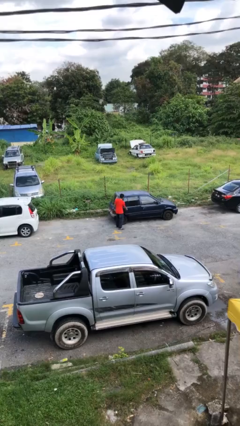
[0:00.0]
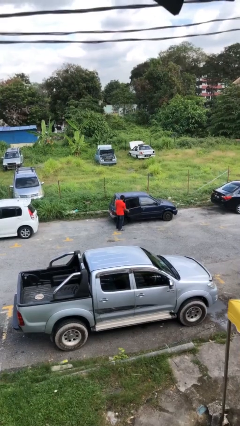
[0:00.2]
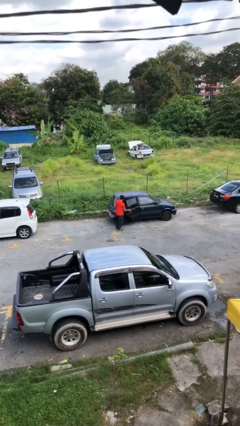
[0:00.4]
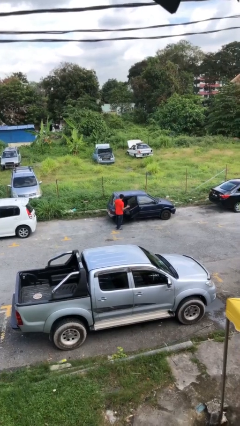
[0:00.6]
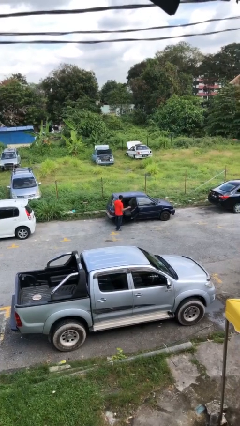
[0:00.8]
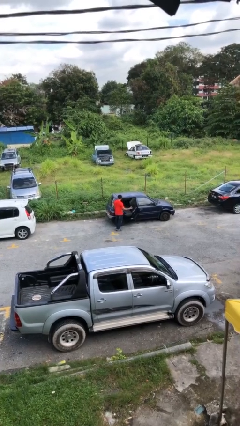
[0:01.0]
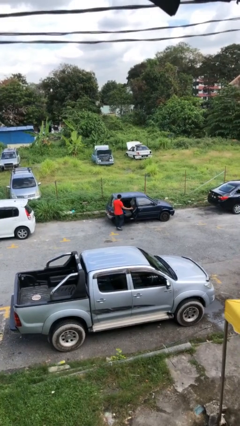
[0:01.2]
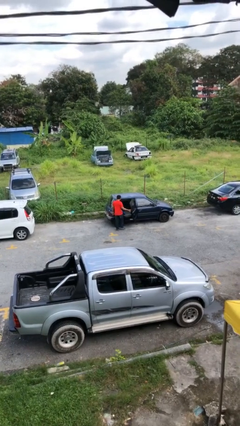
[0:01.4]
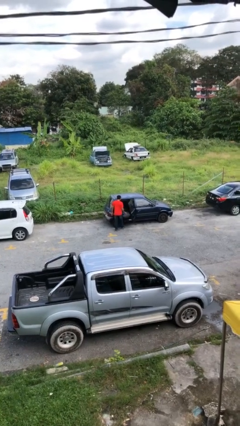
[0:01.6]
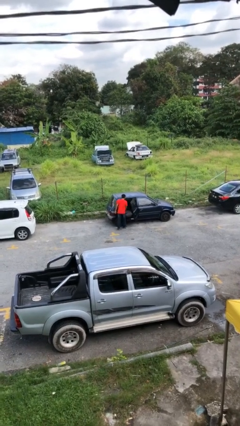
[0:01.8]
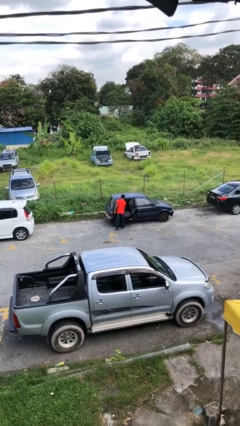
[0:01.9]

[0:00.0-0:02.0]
person opens car door

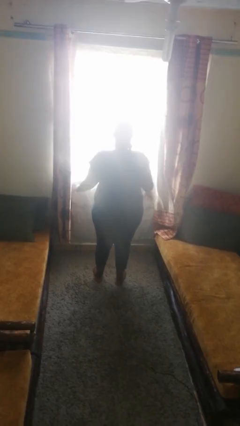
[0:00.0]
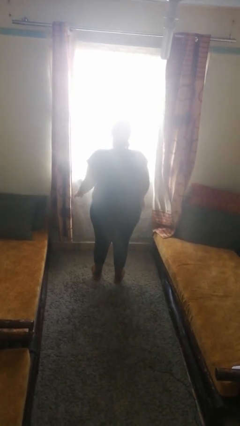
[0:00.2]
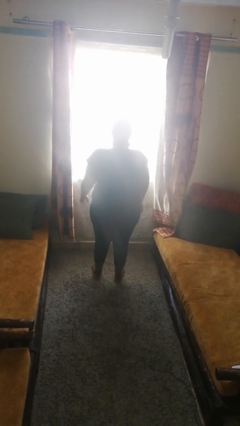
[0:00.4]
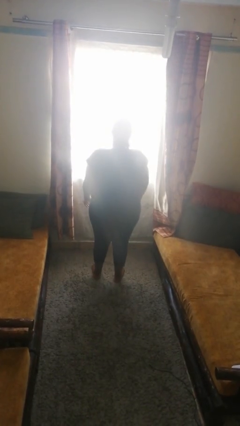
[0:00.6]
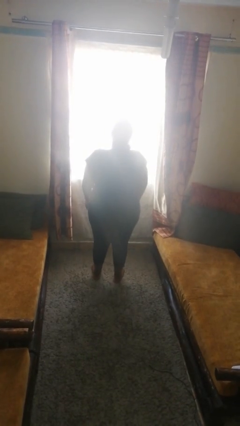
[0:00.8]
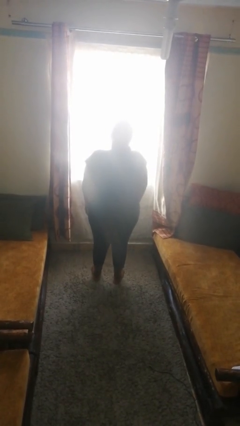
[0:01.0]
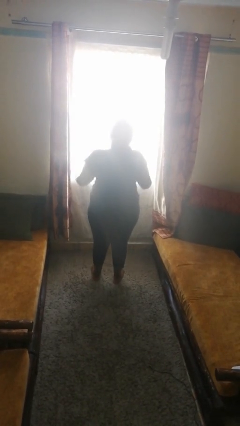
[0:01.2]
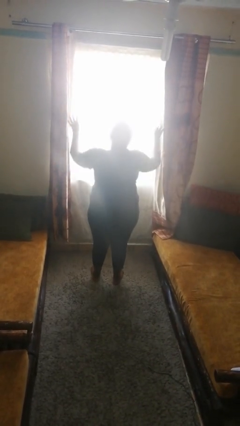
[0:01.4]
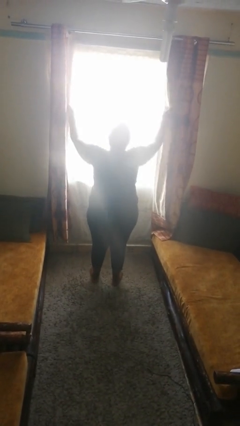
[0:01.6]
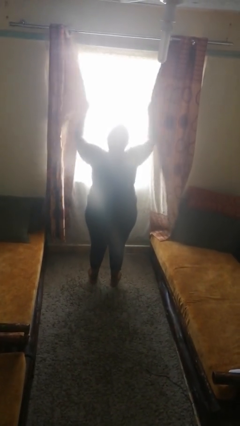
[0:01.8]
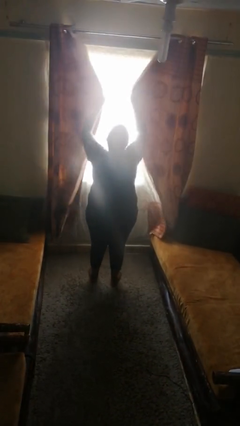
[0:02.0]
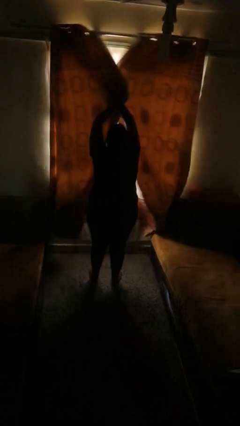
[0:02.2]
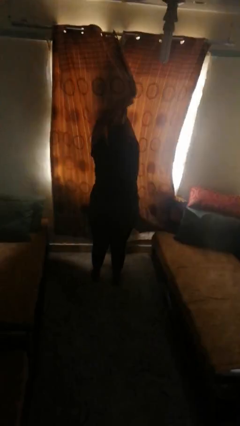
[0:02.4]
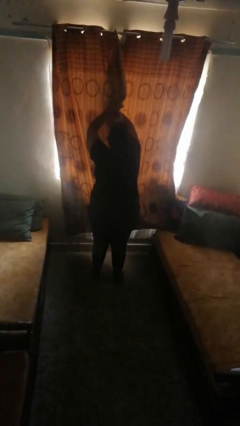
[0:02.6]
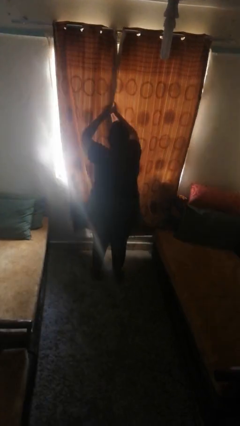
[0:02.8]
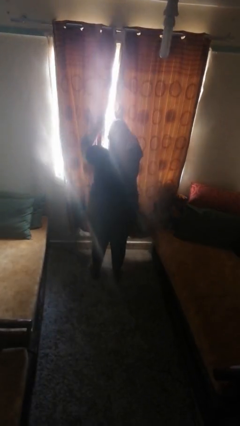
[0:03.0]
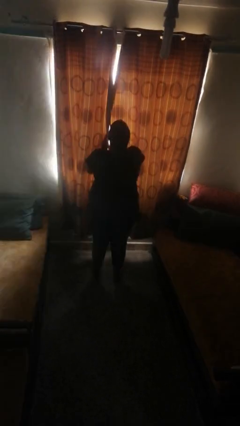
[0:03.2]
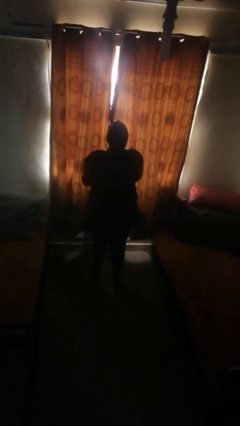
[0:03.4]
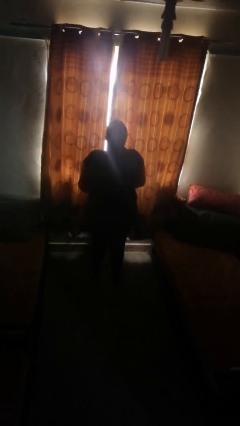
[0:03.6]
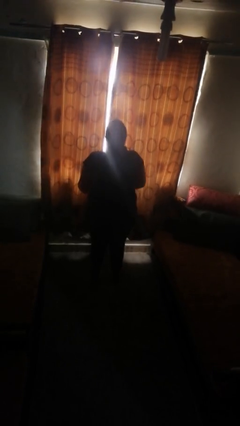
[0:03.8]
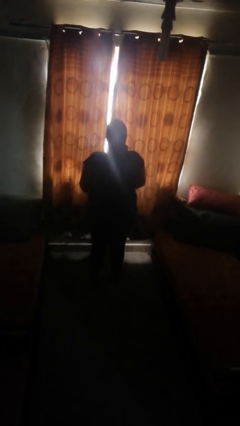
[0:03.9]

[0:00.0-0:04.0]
person closes curtains

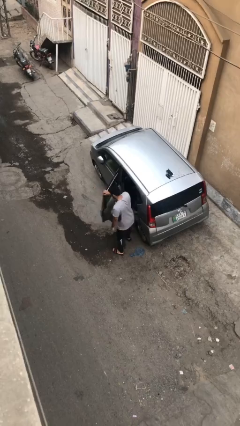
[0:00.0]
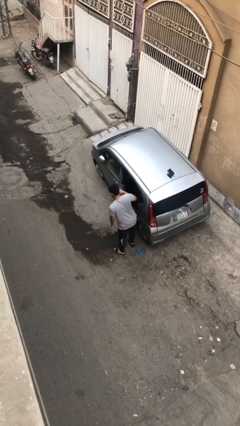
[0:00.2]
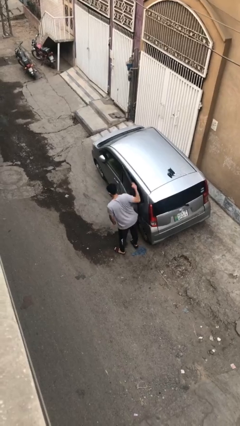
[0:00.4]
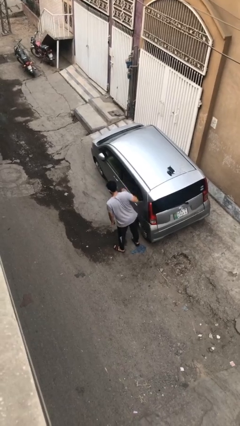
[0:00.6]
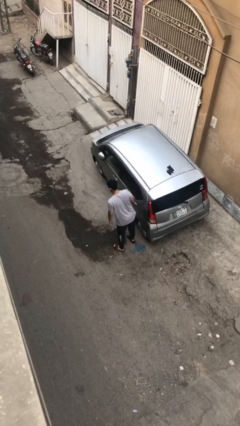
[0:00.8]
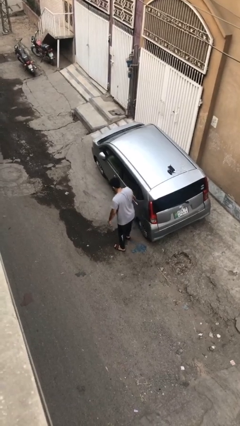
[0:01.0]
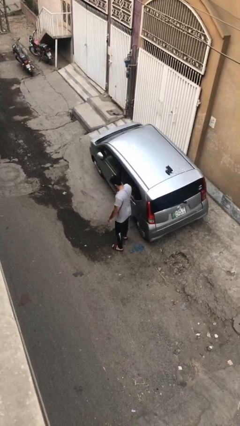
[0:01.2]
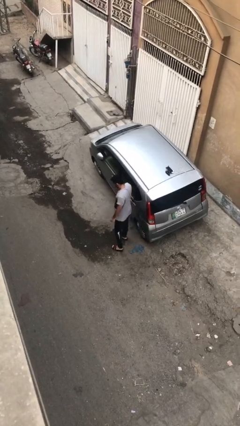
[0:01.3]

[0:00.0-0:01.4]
person closes car door

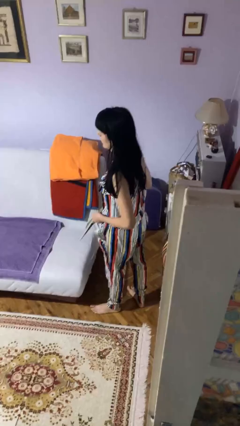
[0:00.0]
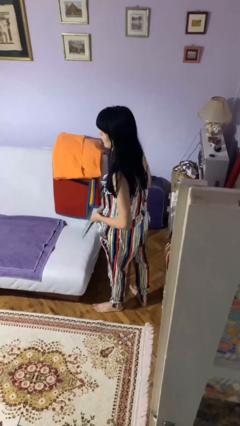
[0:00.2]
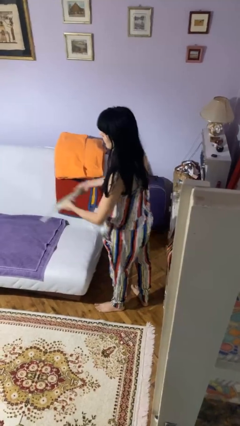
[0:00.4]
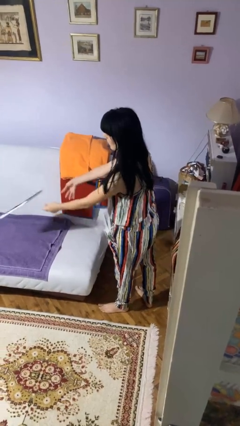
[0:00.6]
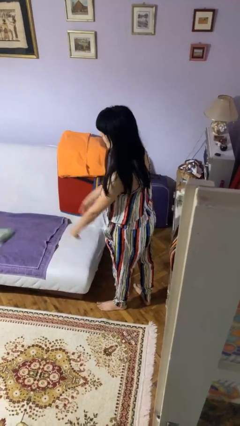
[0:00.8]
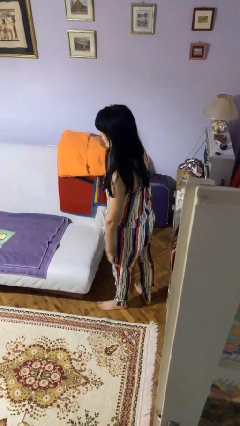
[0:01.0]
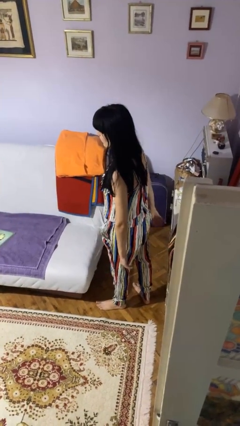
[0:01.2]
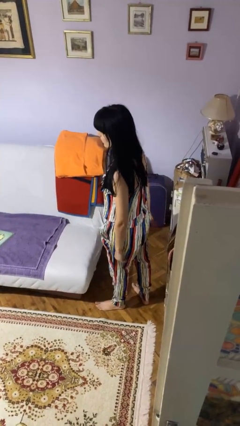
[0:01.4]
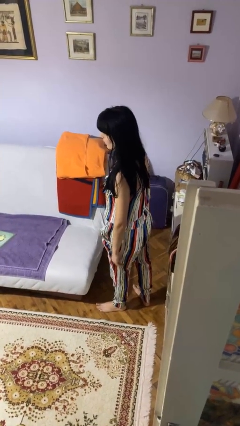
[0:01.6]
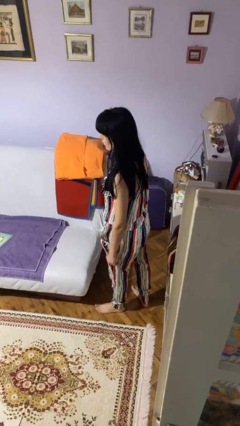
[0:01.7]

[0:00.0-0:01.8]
person throws object on bed

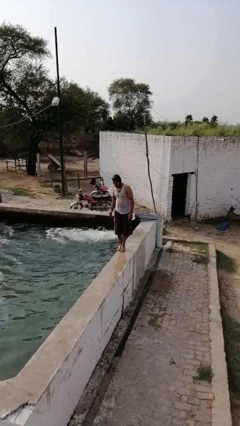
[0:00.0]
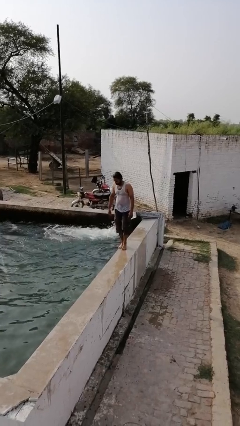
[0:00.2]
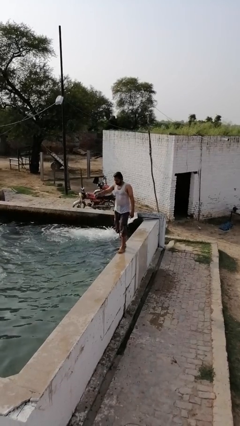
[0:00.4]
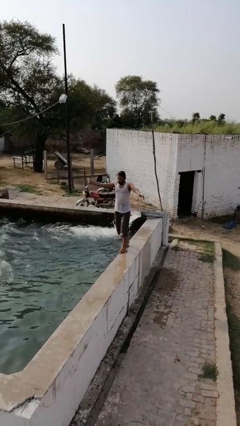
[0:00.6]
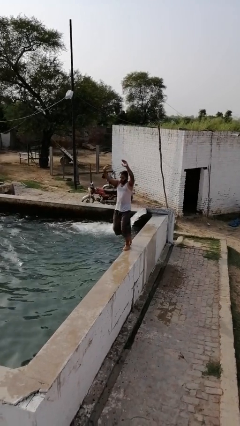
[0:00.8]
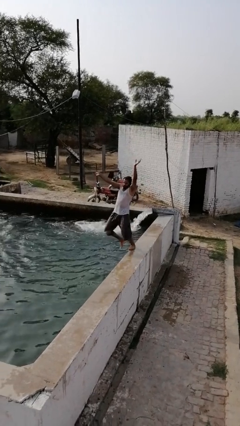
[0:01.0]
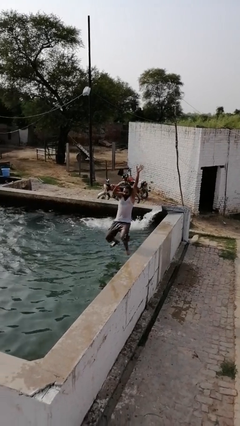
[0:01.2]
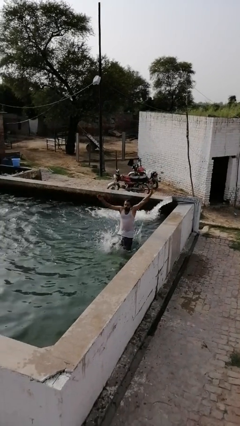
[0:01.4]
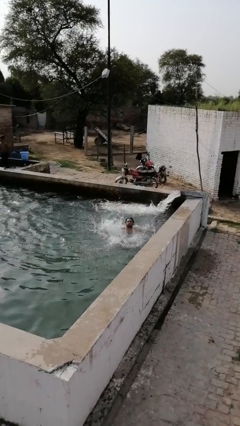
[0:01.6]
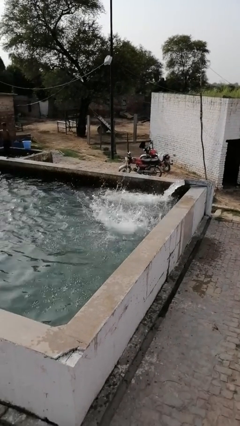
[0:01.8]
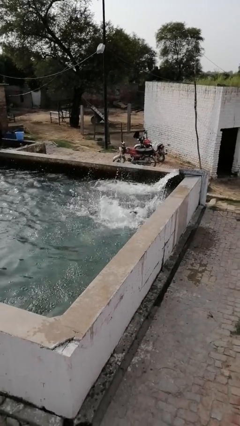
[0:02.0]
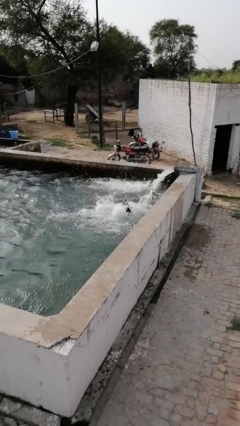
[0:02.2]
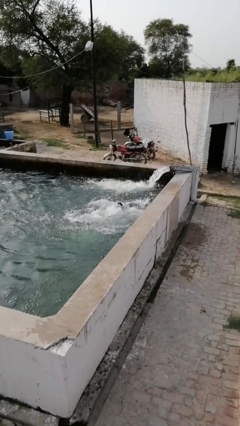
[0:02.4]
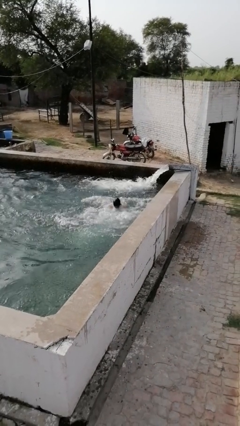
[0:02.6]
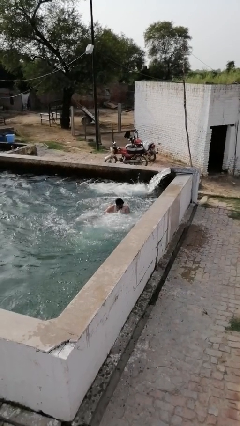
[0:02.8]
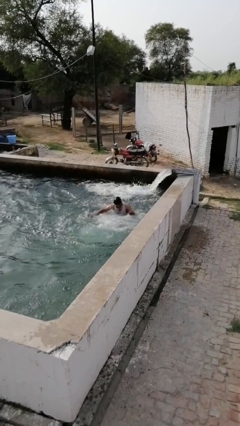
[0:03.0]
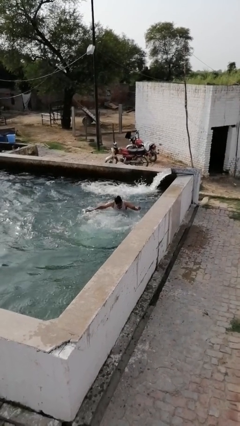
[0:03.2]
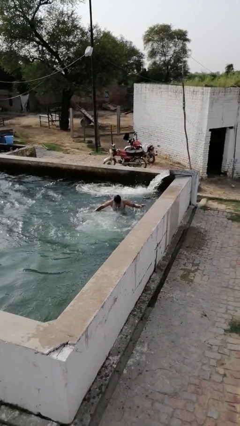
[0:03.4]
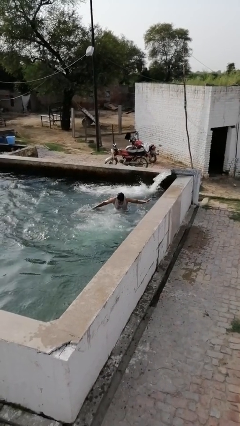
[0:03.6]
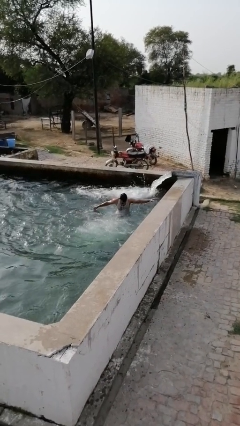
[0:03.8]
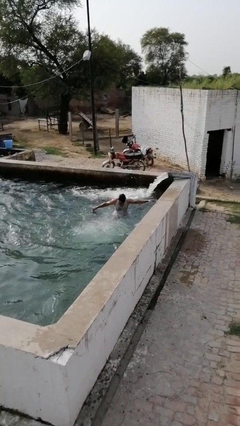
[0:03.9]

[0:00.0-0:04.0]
person falls into pool

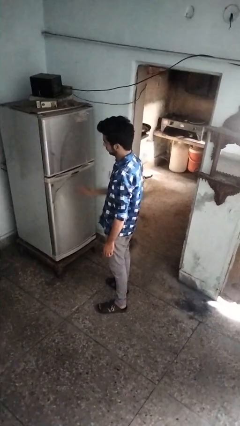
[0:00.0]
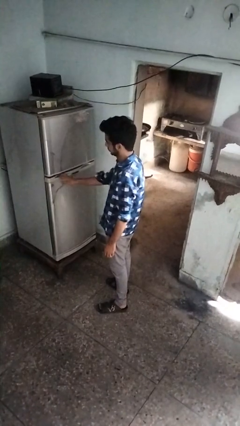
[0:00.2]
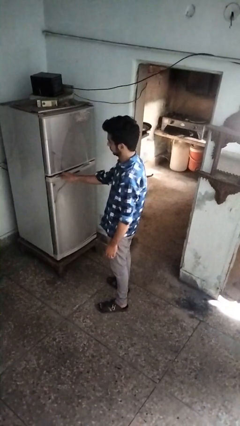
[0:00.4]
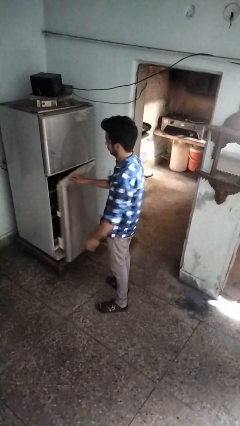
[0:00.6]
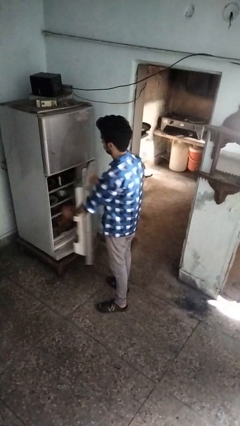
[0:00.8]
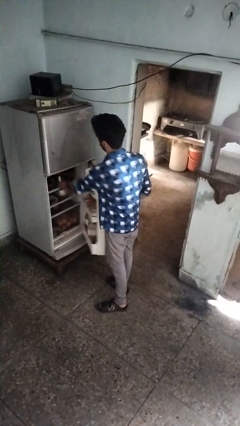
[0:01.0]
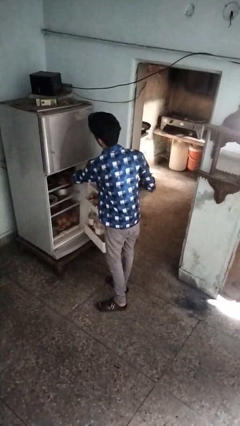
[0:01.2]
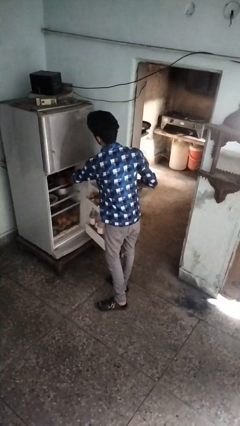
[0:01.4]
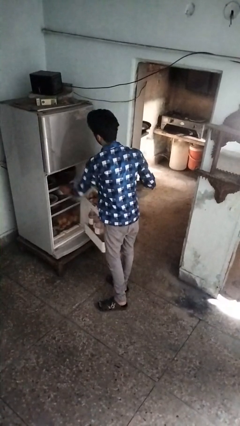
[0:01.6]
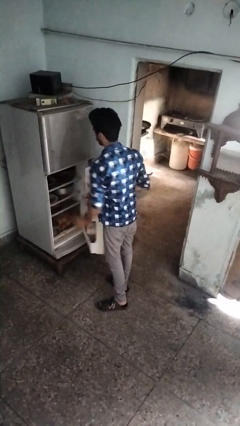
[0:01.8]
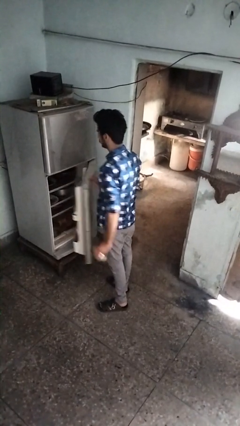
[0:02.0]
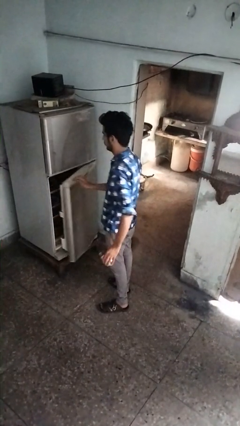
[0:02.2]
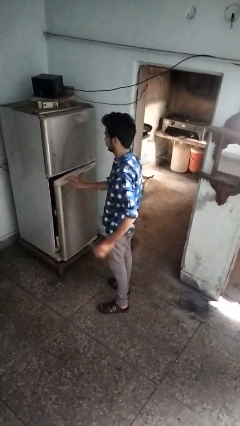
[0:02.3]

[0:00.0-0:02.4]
person takes object from refrigerator

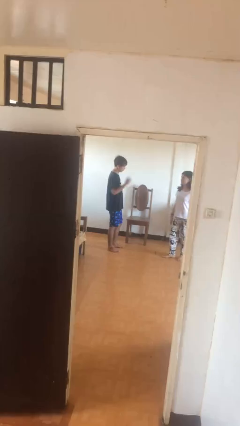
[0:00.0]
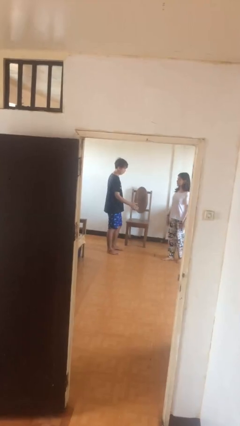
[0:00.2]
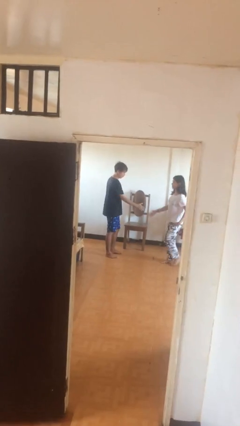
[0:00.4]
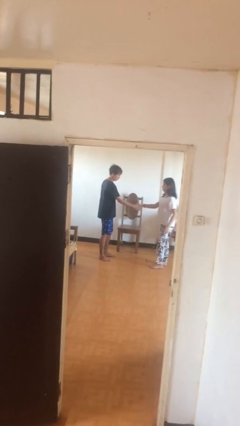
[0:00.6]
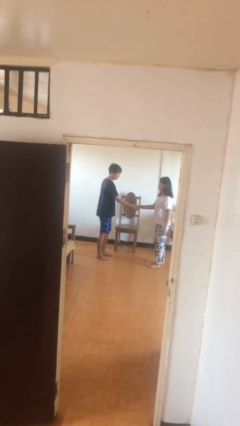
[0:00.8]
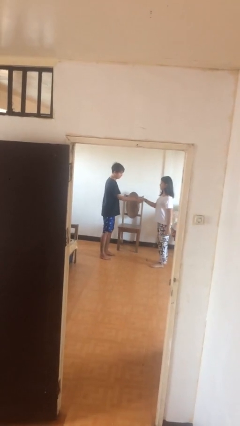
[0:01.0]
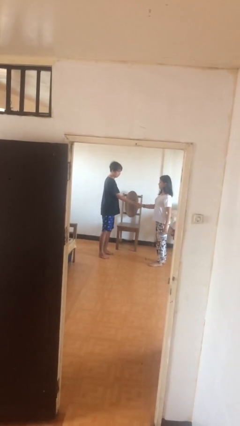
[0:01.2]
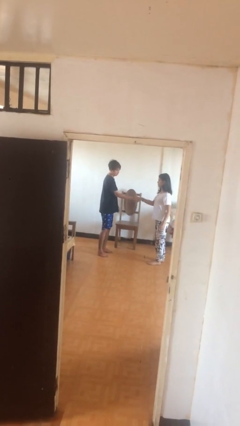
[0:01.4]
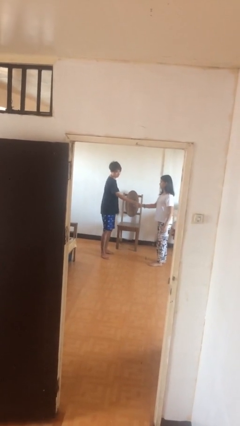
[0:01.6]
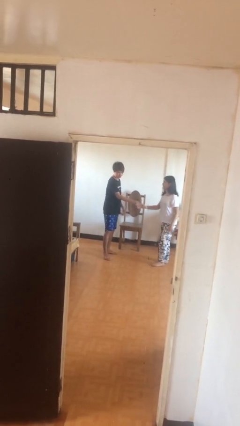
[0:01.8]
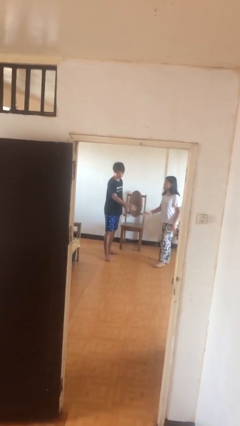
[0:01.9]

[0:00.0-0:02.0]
person shakes hand
